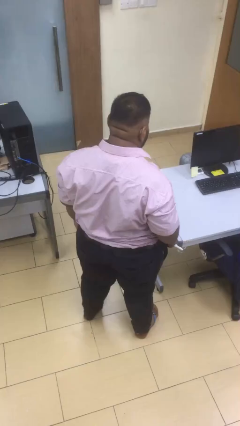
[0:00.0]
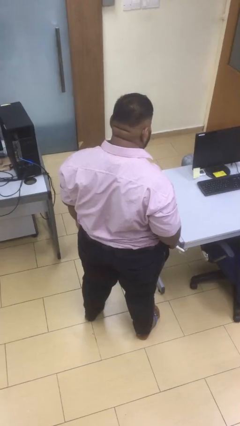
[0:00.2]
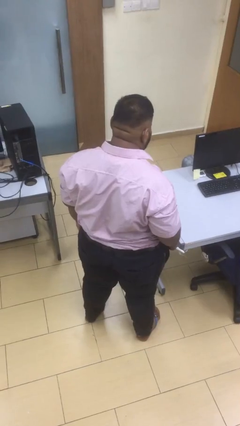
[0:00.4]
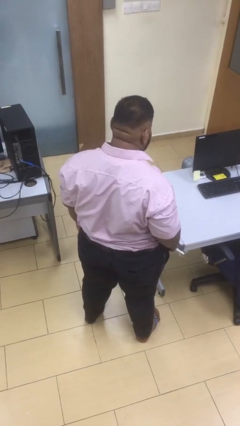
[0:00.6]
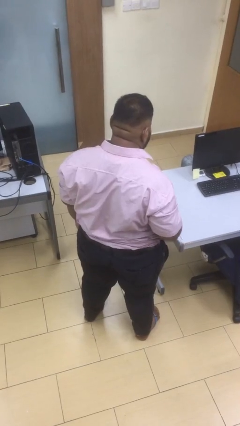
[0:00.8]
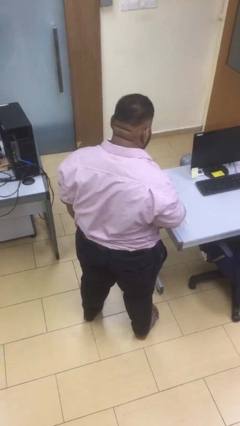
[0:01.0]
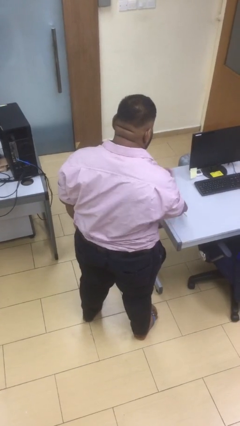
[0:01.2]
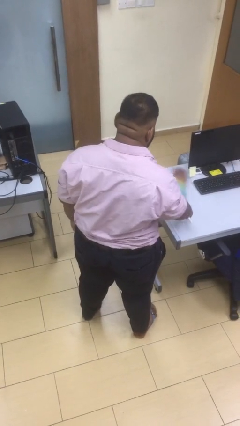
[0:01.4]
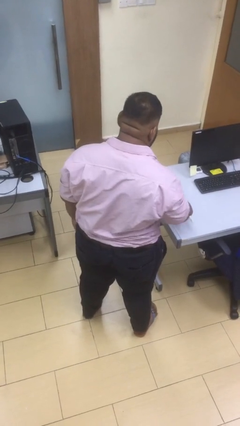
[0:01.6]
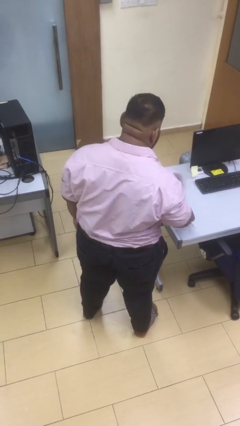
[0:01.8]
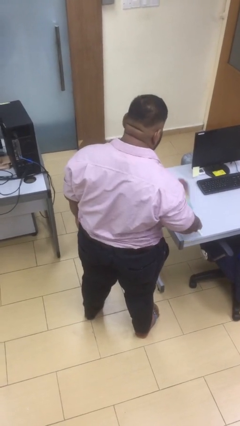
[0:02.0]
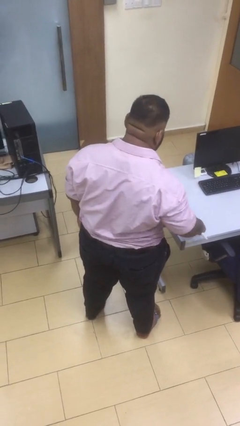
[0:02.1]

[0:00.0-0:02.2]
person dusts furniture

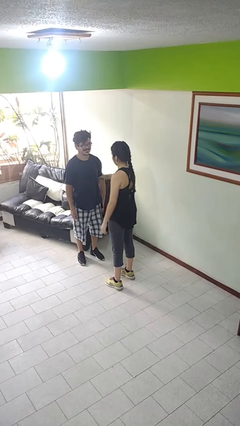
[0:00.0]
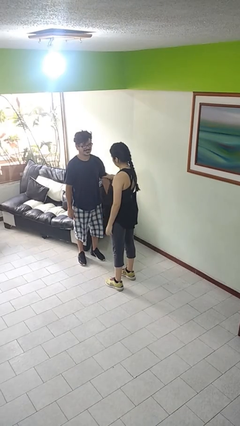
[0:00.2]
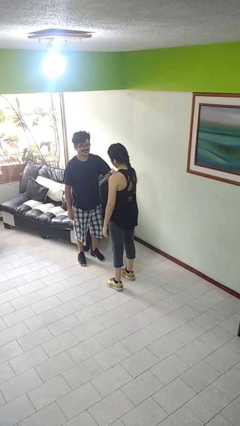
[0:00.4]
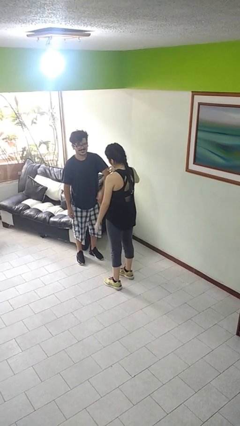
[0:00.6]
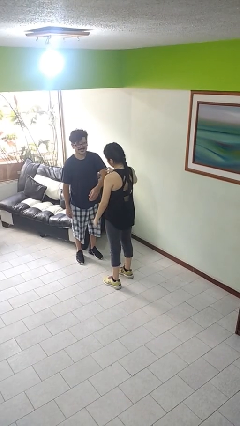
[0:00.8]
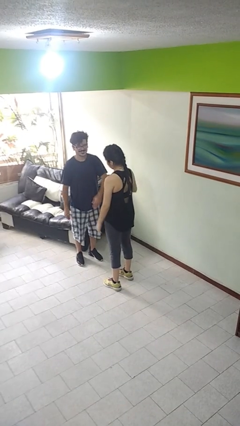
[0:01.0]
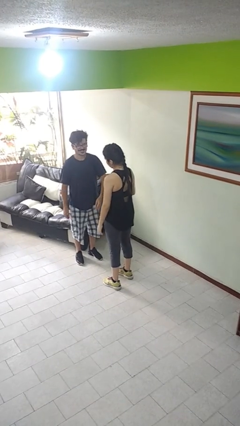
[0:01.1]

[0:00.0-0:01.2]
person grabs person by bicep

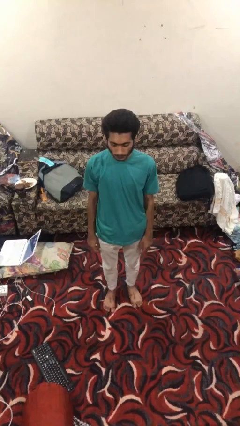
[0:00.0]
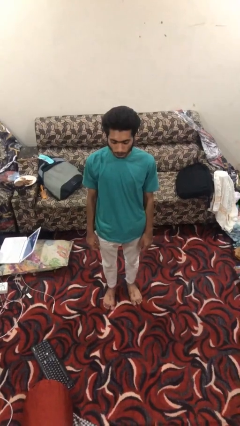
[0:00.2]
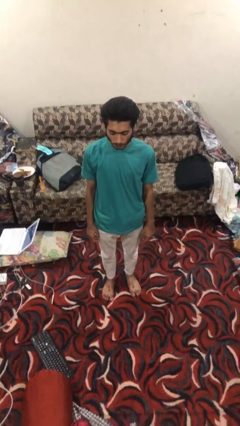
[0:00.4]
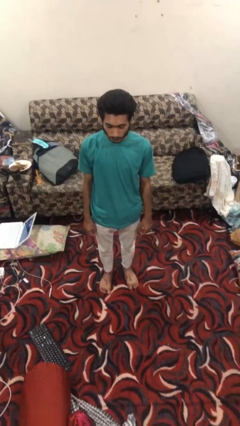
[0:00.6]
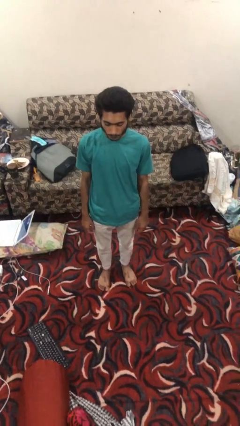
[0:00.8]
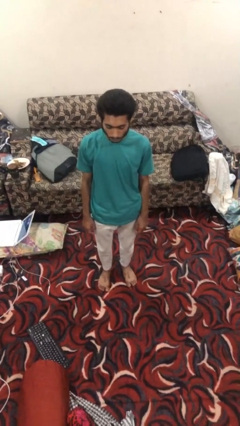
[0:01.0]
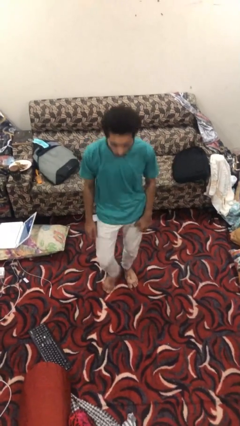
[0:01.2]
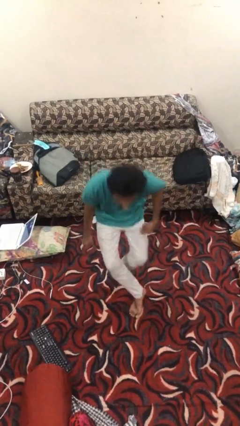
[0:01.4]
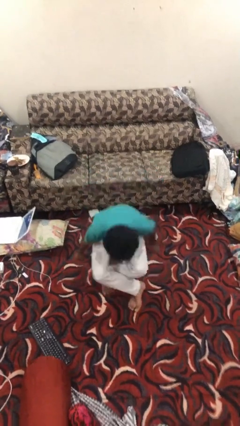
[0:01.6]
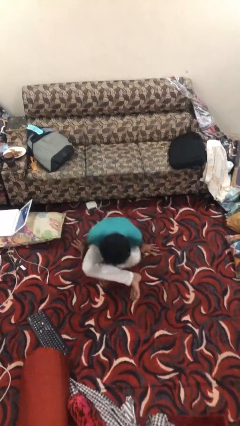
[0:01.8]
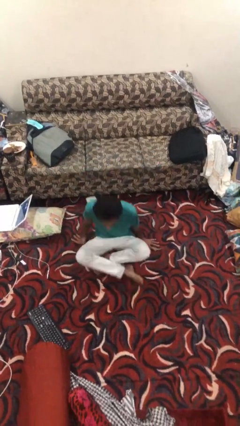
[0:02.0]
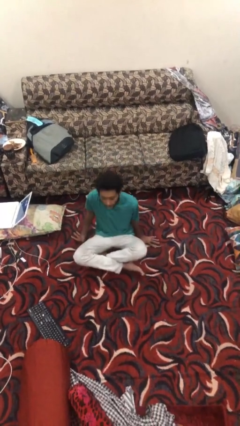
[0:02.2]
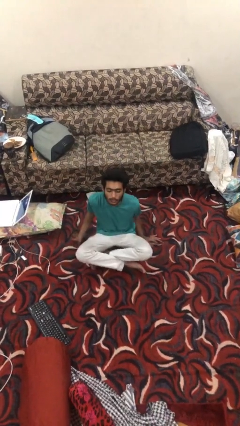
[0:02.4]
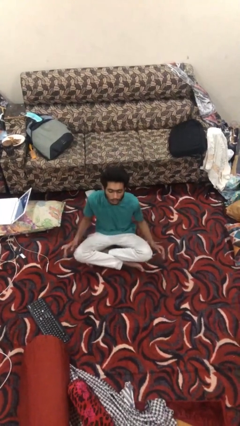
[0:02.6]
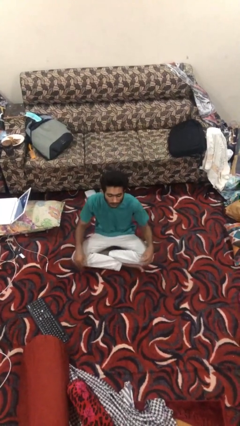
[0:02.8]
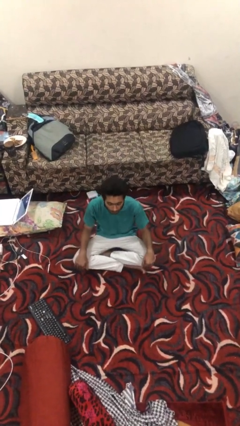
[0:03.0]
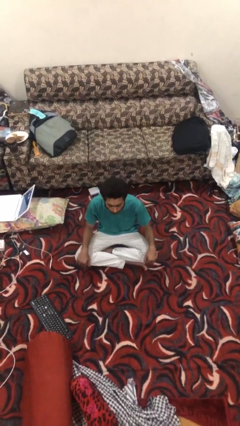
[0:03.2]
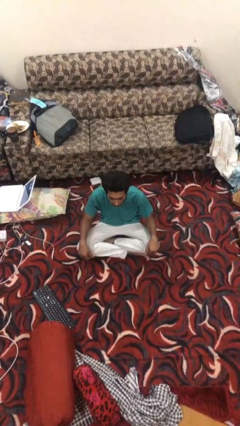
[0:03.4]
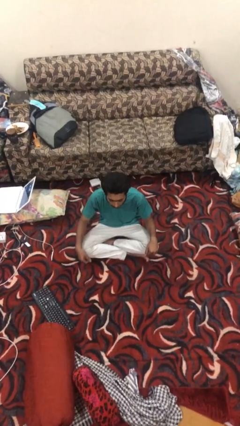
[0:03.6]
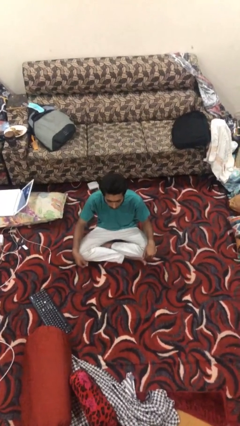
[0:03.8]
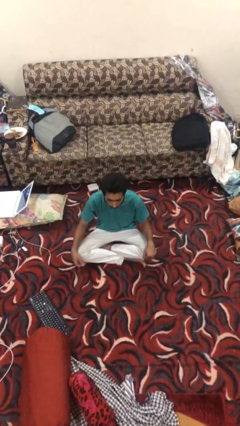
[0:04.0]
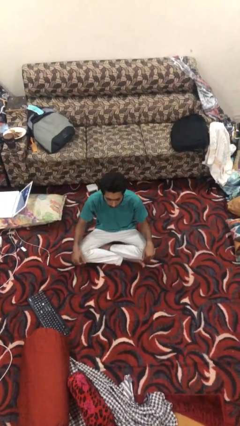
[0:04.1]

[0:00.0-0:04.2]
person sits crisscross

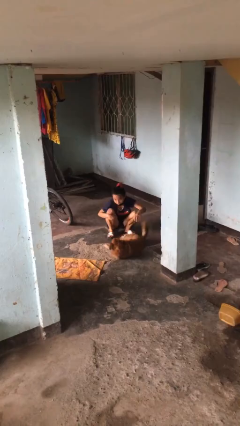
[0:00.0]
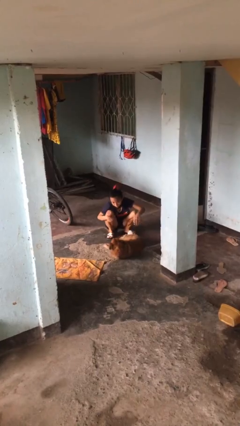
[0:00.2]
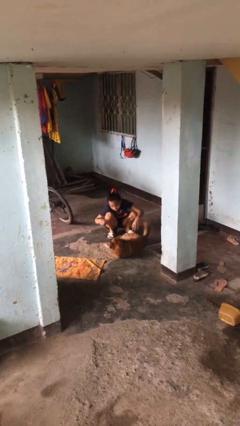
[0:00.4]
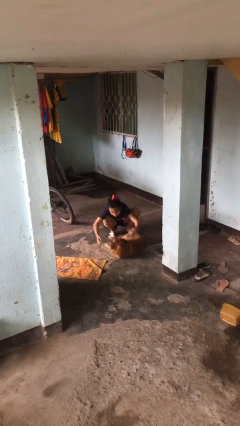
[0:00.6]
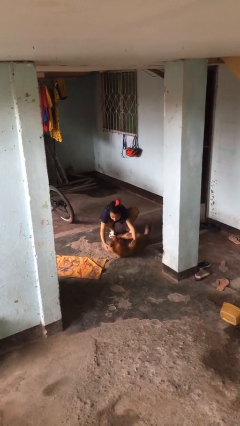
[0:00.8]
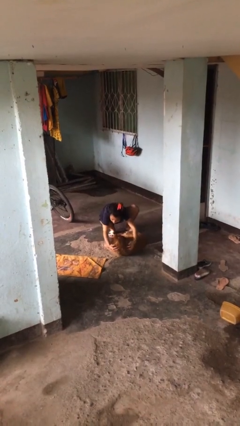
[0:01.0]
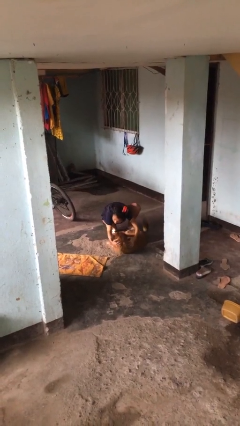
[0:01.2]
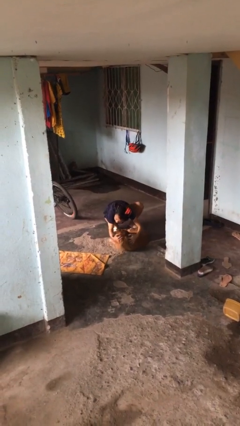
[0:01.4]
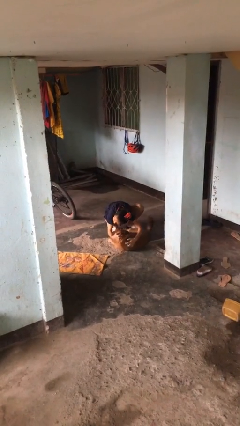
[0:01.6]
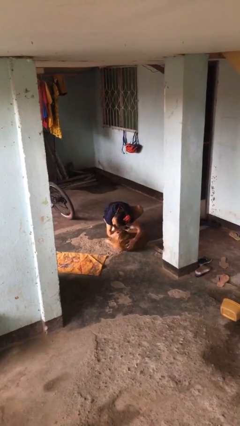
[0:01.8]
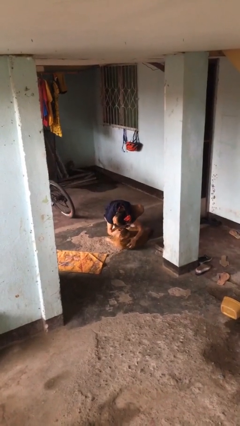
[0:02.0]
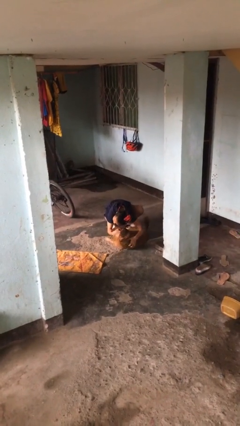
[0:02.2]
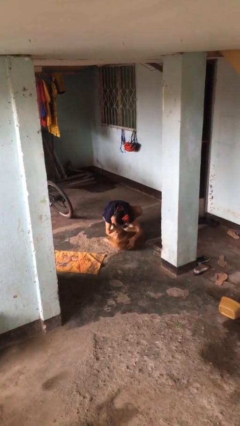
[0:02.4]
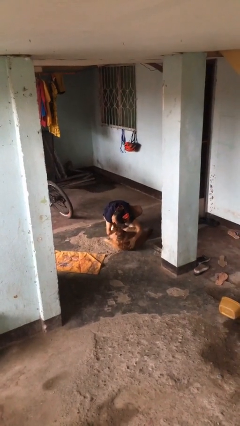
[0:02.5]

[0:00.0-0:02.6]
person hugs dog

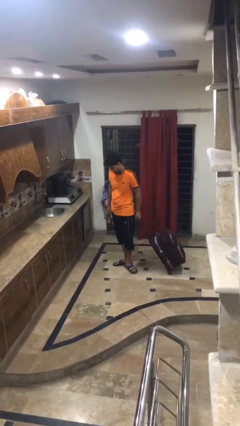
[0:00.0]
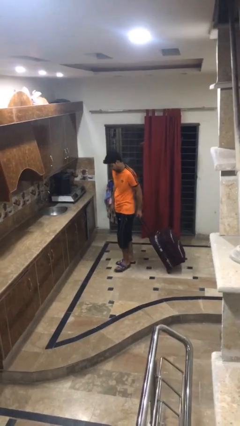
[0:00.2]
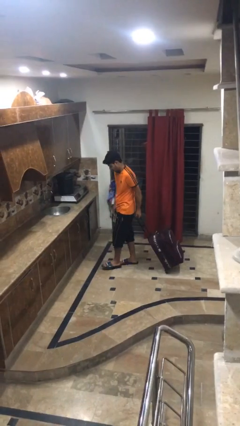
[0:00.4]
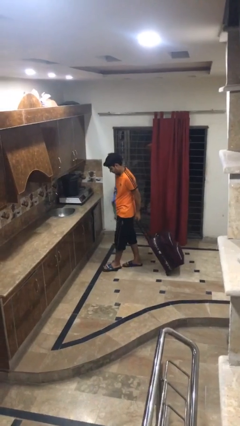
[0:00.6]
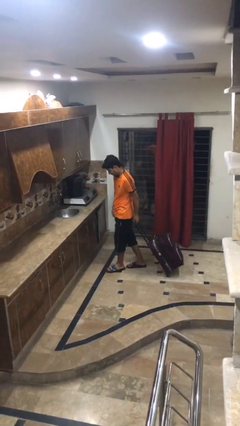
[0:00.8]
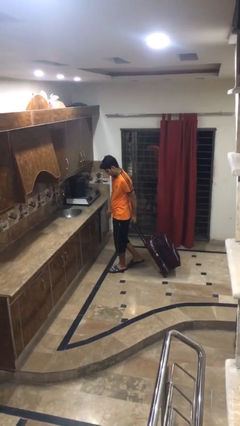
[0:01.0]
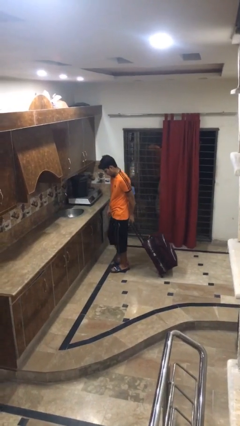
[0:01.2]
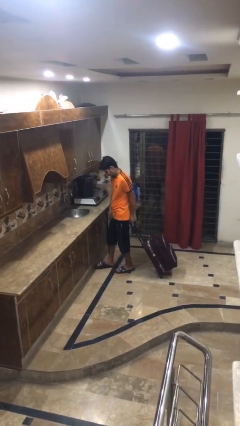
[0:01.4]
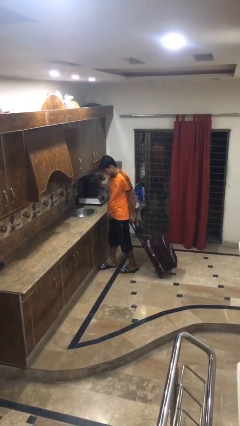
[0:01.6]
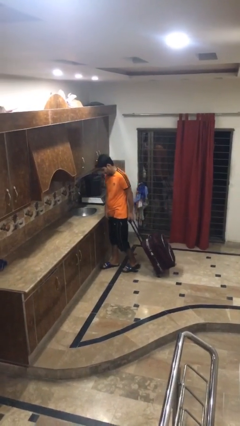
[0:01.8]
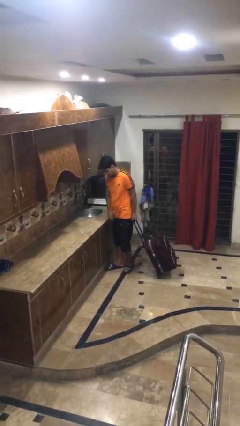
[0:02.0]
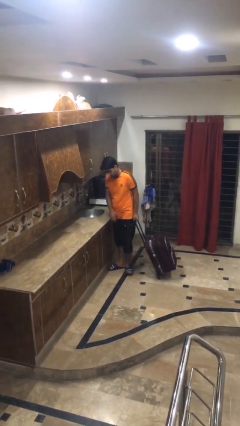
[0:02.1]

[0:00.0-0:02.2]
person pulls wheeled cart

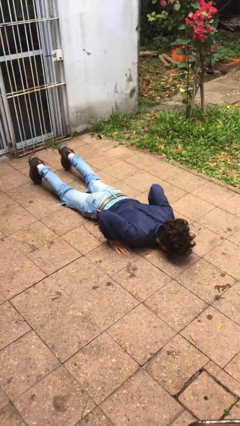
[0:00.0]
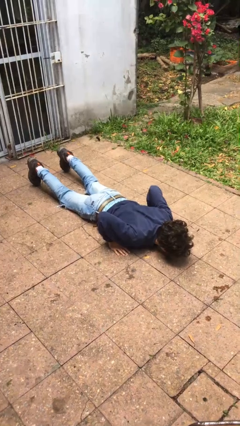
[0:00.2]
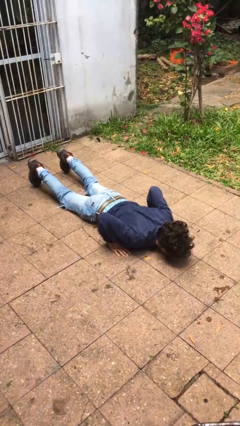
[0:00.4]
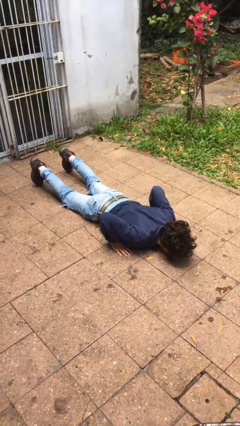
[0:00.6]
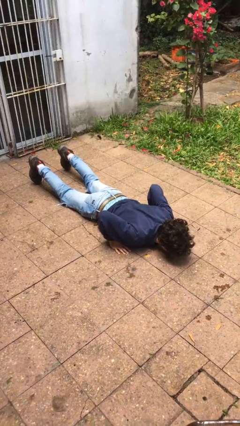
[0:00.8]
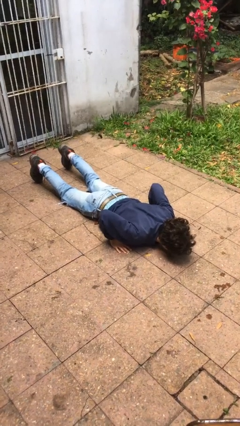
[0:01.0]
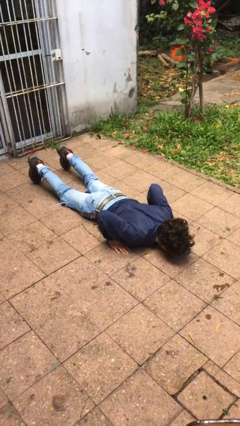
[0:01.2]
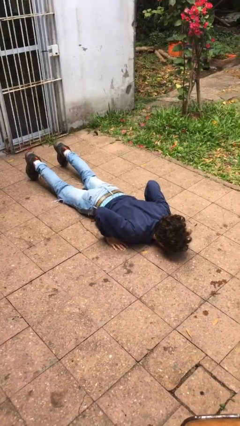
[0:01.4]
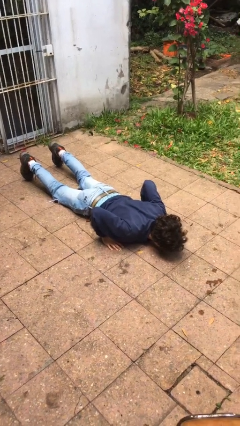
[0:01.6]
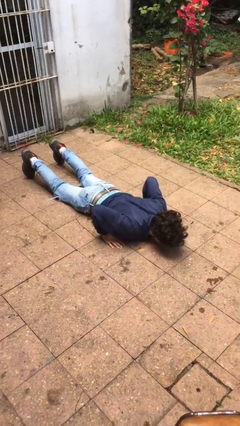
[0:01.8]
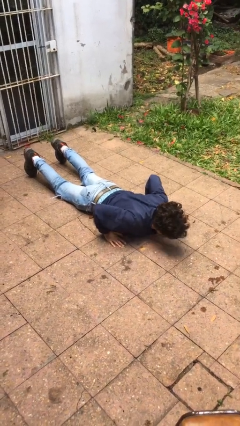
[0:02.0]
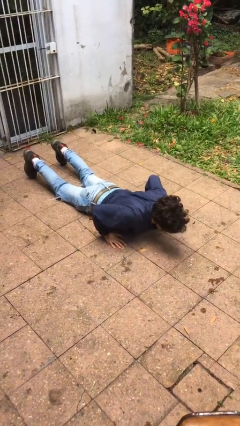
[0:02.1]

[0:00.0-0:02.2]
person exercises with pushup

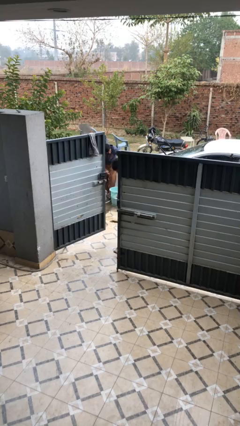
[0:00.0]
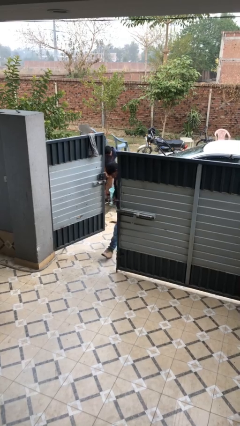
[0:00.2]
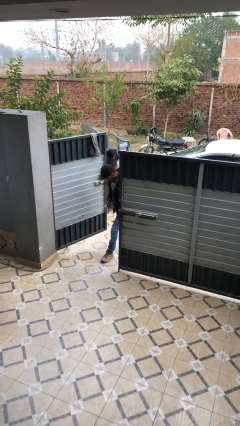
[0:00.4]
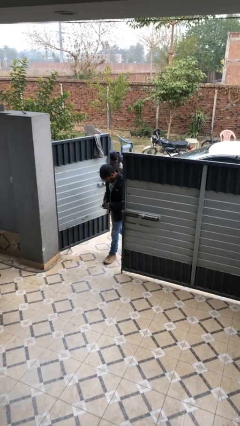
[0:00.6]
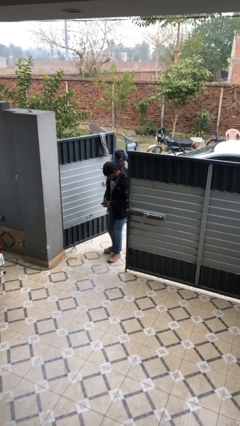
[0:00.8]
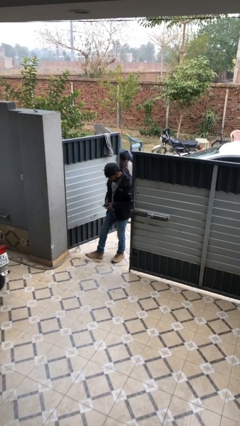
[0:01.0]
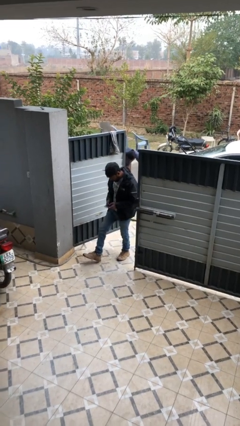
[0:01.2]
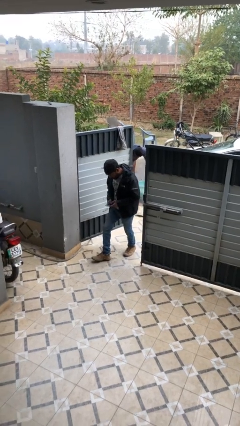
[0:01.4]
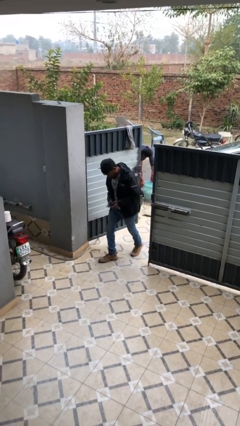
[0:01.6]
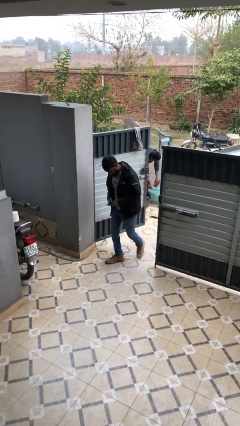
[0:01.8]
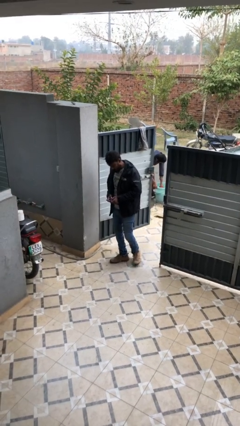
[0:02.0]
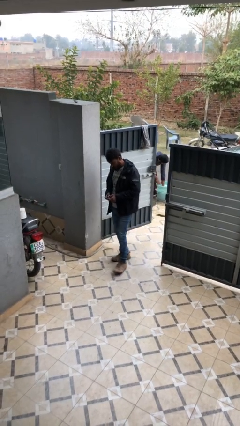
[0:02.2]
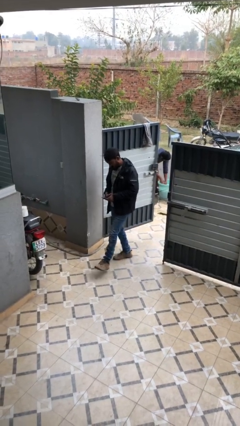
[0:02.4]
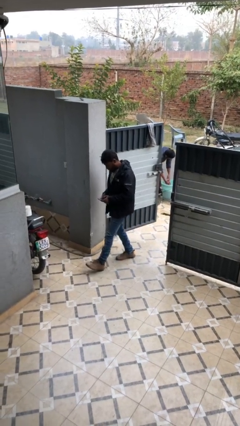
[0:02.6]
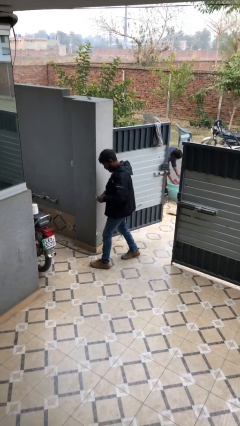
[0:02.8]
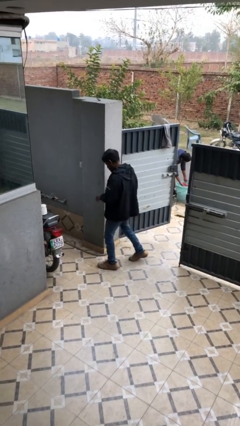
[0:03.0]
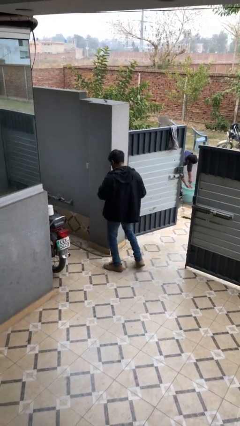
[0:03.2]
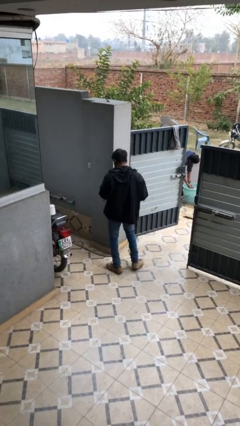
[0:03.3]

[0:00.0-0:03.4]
person enters scene through structure
